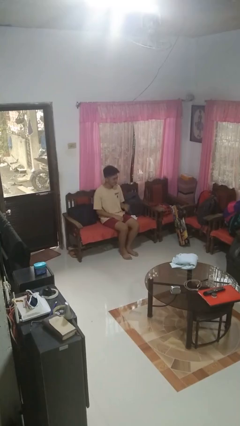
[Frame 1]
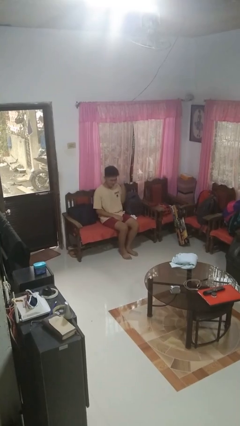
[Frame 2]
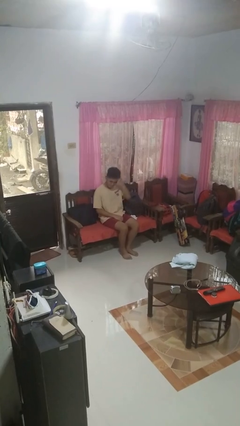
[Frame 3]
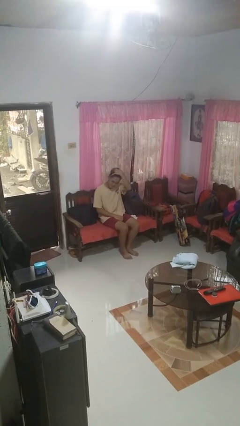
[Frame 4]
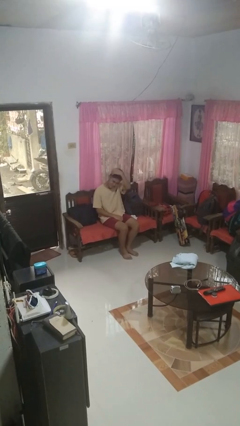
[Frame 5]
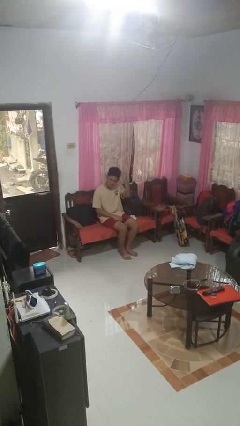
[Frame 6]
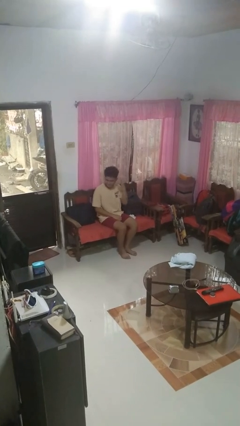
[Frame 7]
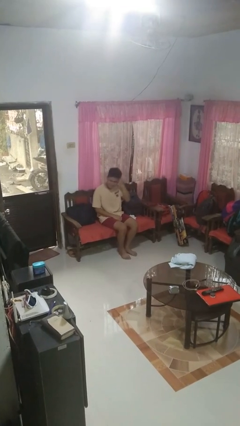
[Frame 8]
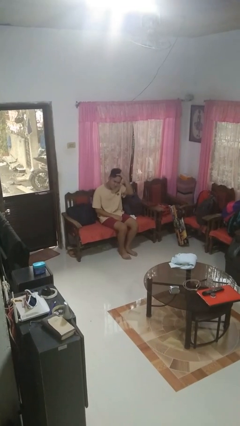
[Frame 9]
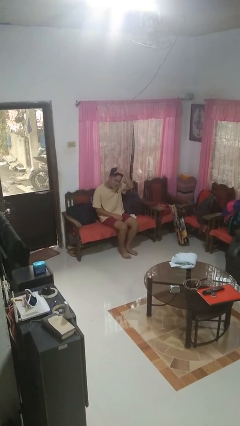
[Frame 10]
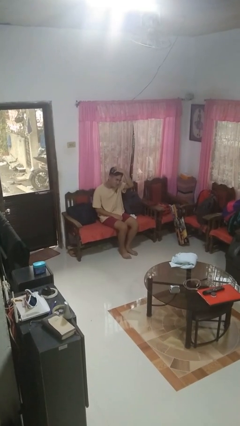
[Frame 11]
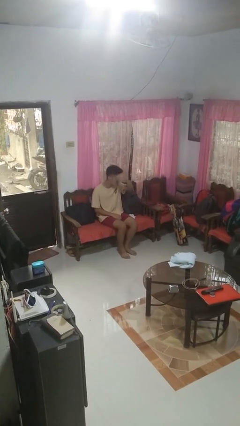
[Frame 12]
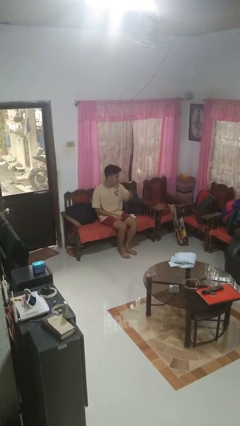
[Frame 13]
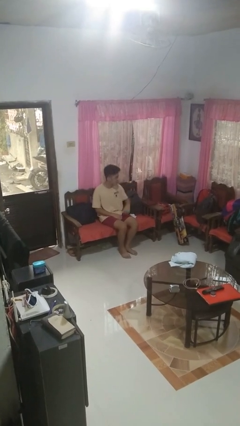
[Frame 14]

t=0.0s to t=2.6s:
person strokes hair

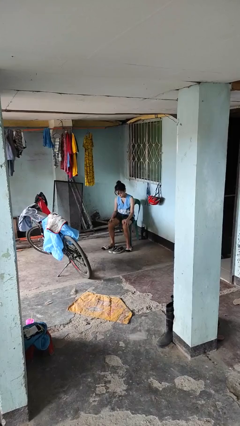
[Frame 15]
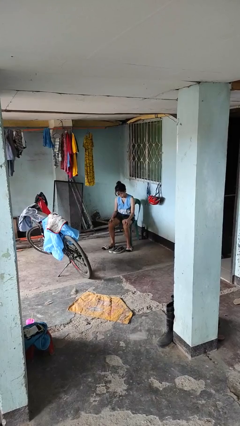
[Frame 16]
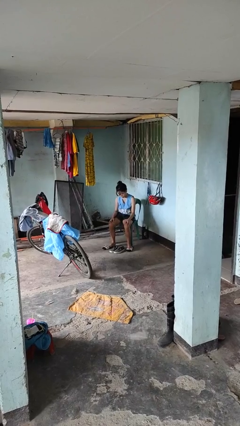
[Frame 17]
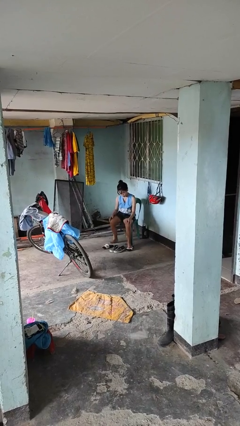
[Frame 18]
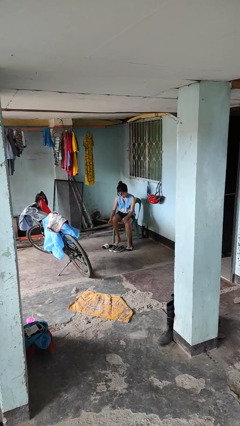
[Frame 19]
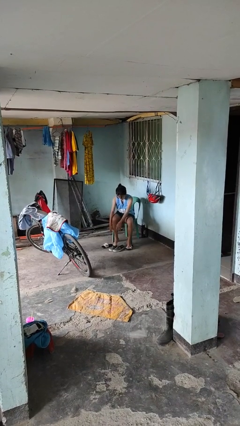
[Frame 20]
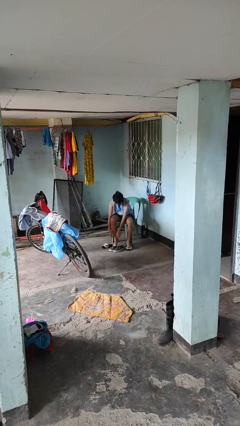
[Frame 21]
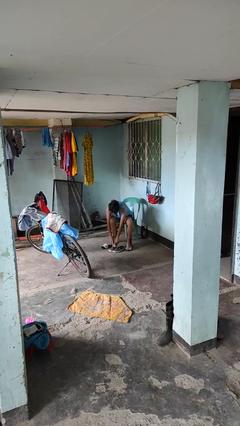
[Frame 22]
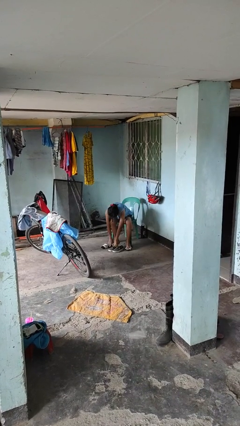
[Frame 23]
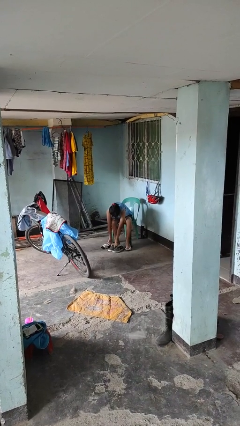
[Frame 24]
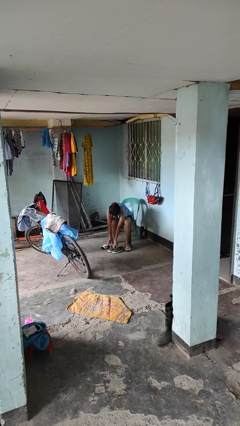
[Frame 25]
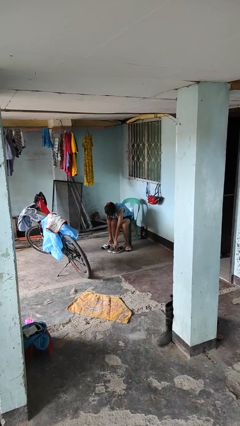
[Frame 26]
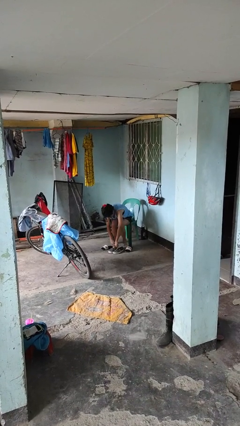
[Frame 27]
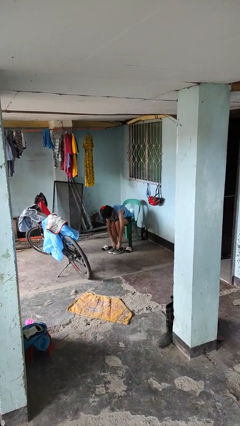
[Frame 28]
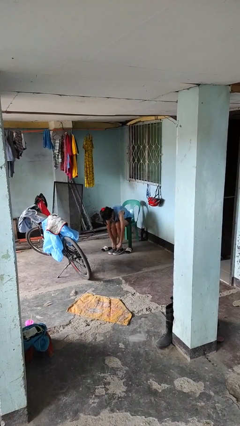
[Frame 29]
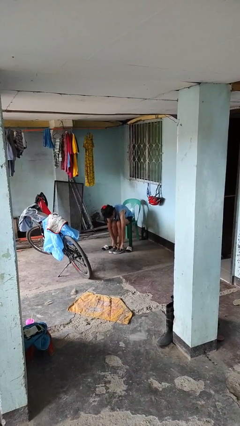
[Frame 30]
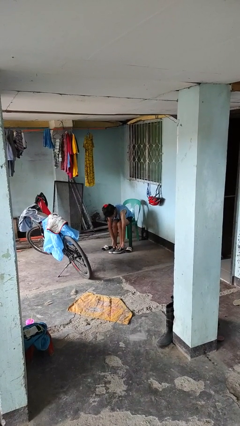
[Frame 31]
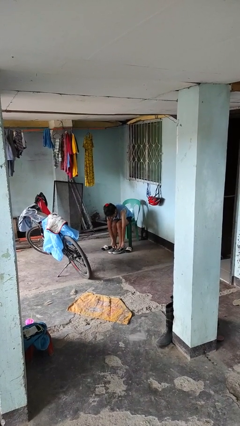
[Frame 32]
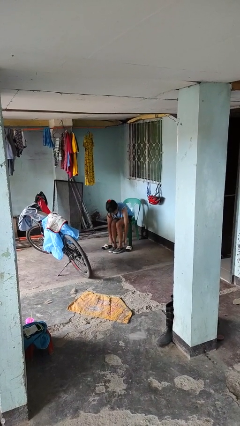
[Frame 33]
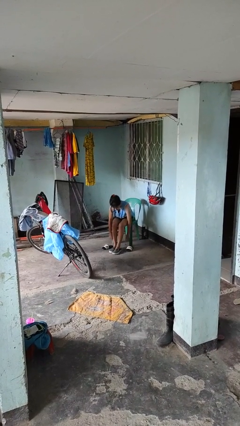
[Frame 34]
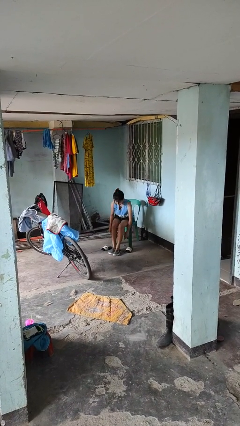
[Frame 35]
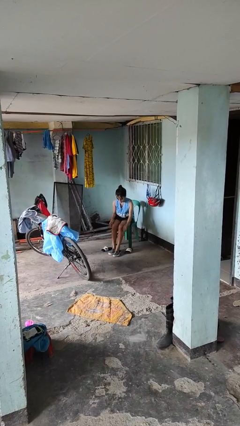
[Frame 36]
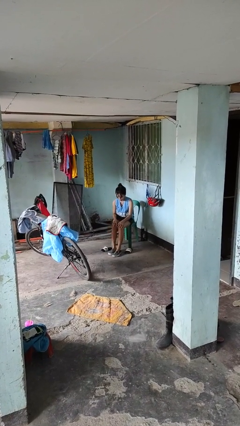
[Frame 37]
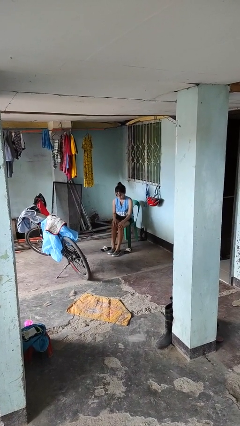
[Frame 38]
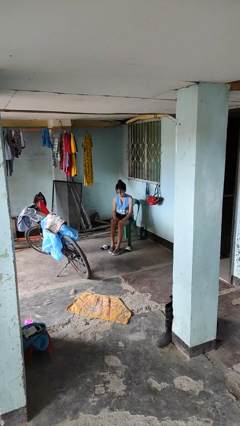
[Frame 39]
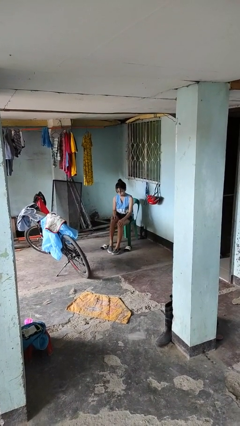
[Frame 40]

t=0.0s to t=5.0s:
person puts on shoes

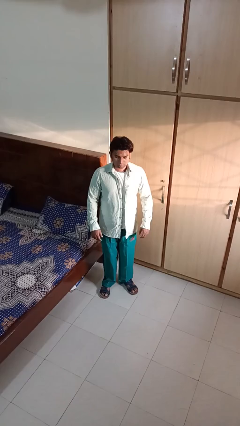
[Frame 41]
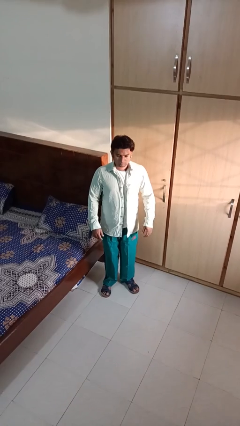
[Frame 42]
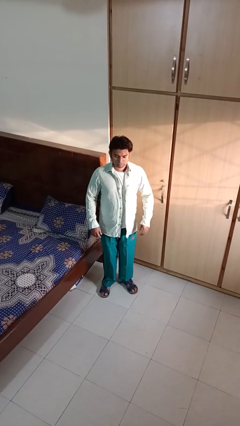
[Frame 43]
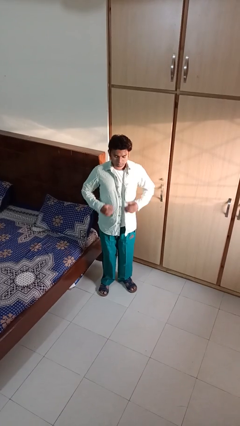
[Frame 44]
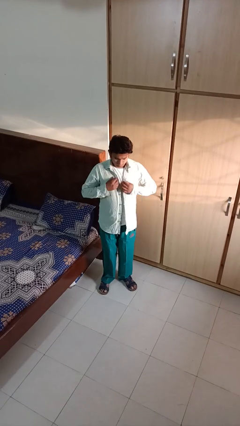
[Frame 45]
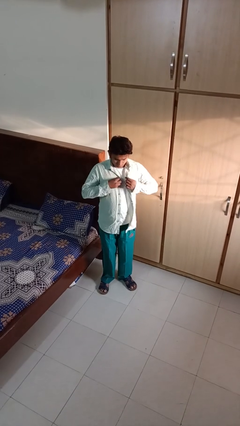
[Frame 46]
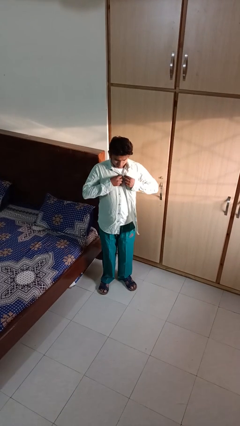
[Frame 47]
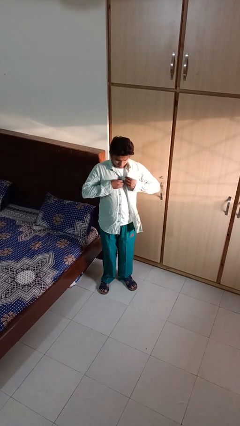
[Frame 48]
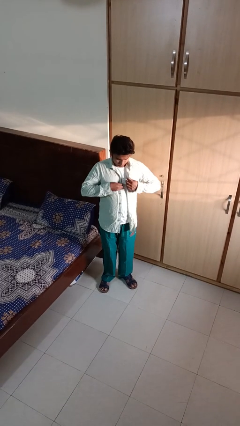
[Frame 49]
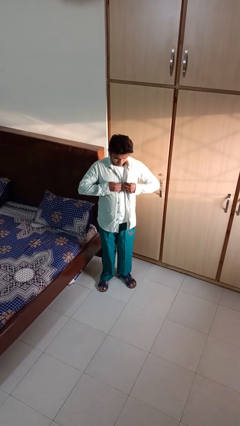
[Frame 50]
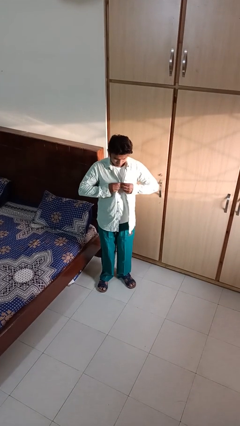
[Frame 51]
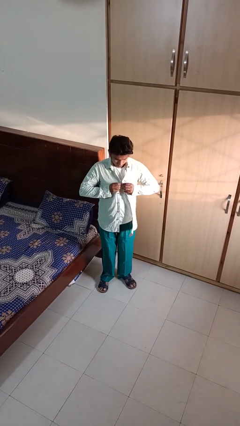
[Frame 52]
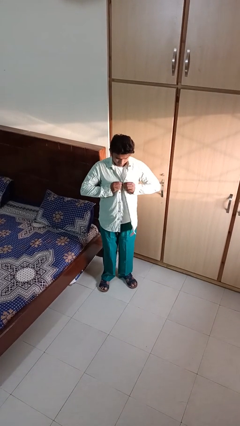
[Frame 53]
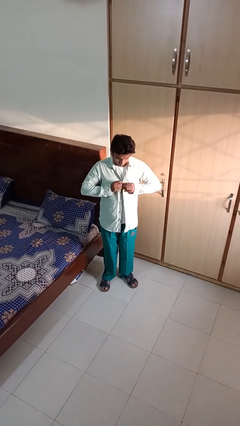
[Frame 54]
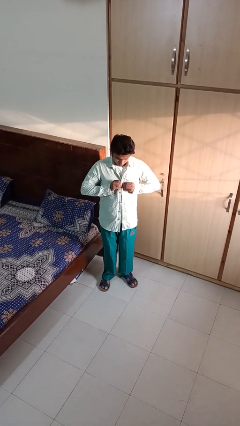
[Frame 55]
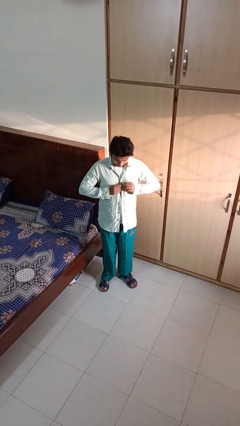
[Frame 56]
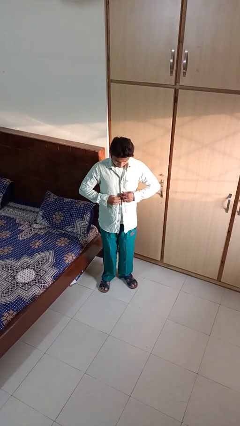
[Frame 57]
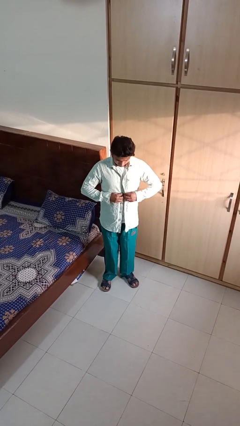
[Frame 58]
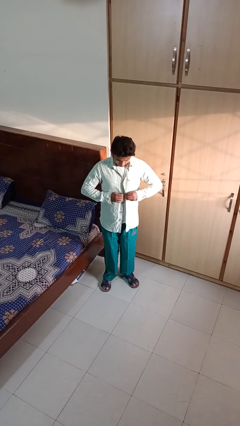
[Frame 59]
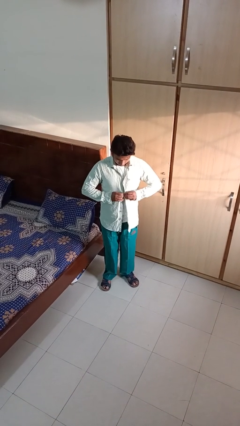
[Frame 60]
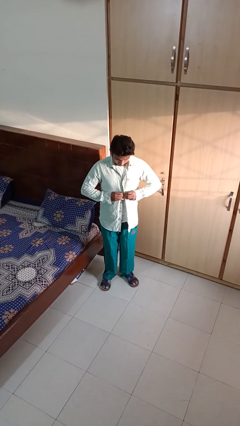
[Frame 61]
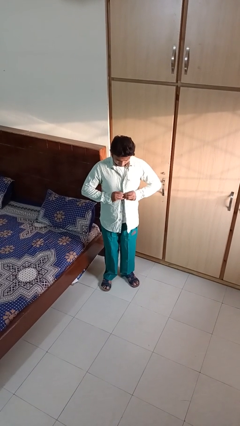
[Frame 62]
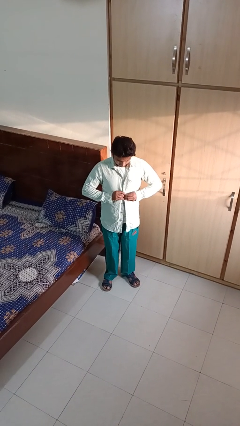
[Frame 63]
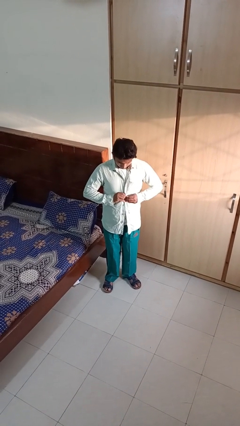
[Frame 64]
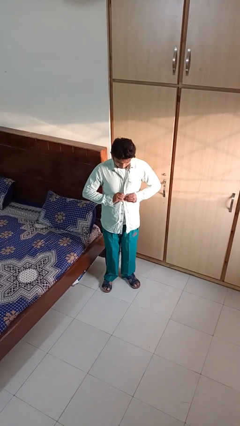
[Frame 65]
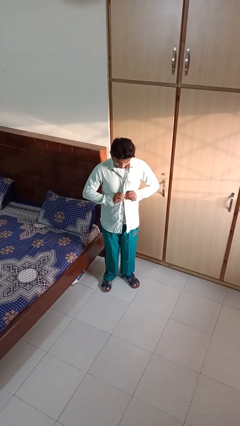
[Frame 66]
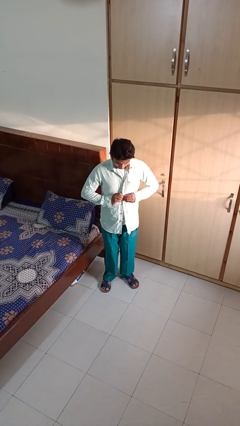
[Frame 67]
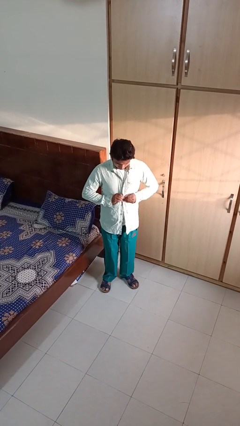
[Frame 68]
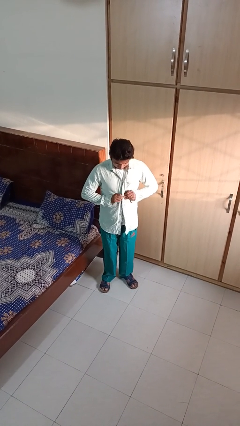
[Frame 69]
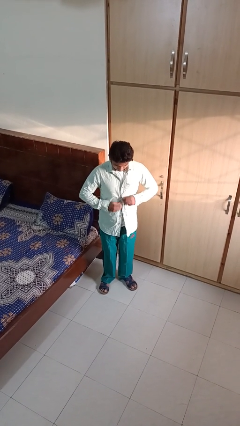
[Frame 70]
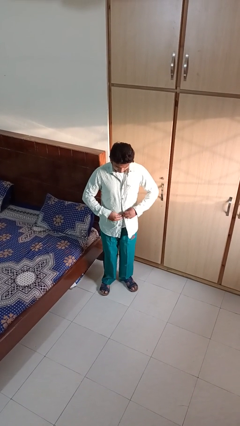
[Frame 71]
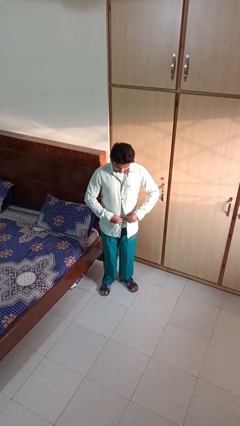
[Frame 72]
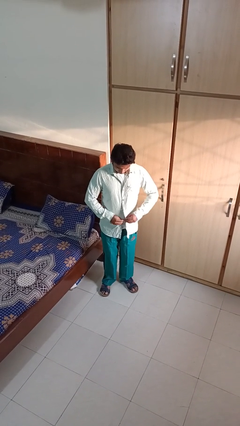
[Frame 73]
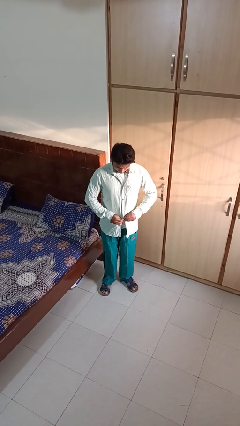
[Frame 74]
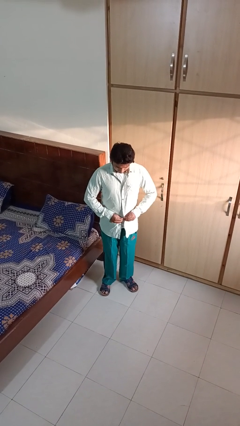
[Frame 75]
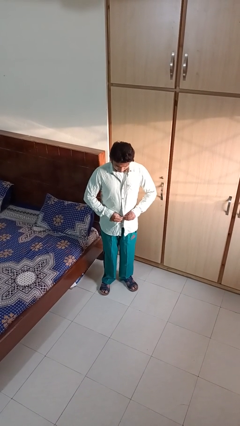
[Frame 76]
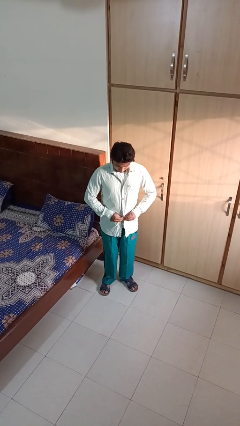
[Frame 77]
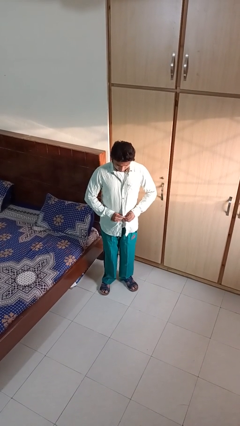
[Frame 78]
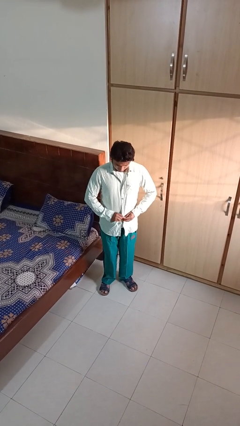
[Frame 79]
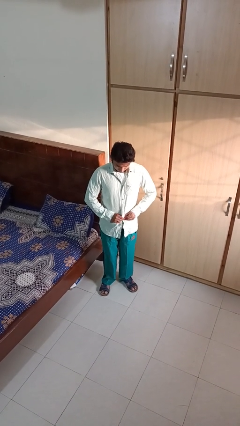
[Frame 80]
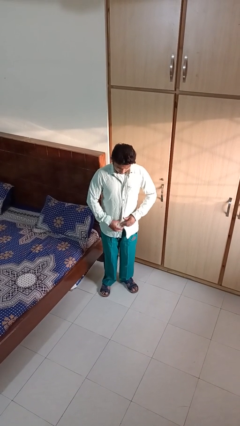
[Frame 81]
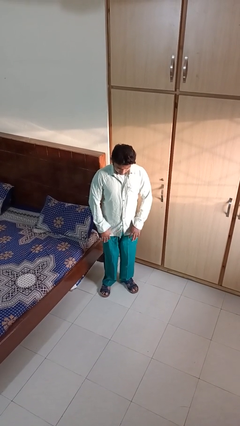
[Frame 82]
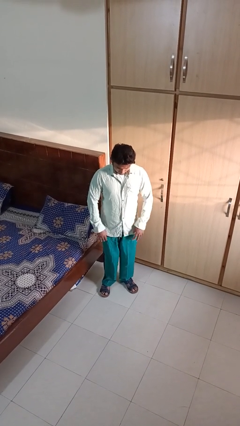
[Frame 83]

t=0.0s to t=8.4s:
person buttons shirt

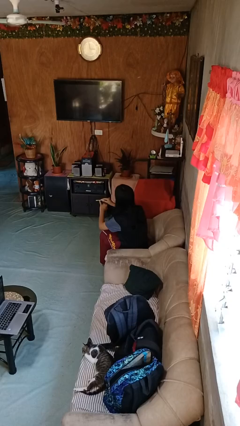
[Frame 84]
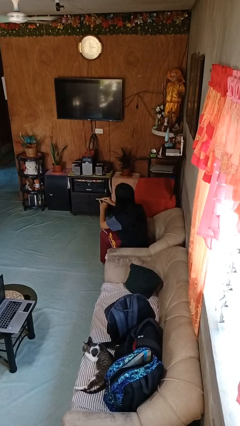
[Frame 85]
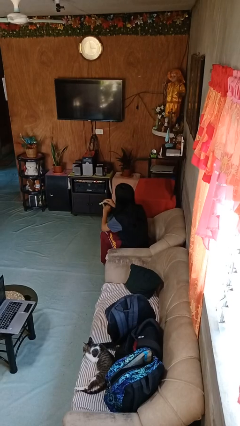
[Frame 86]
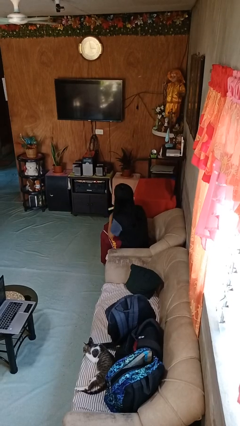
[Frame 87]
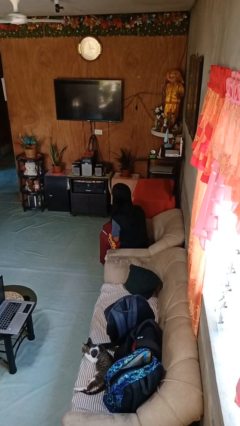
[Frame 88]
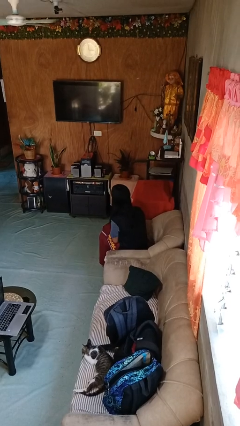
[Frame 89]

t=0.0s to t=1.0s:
person files fingernails
